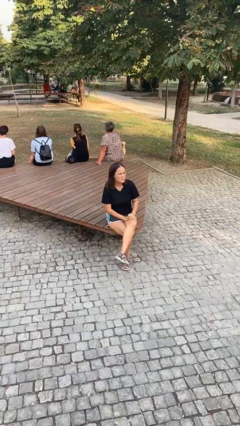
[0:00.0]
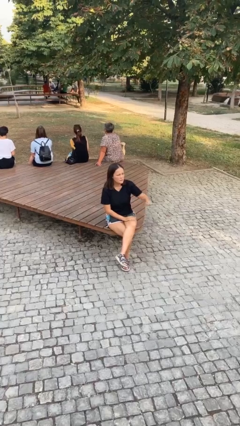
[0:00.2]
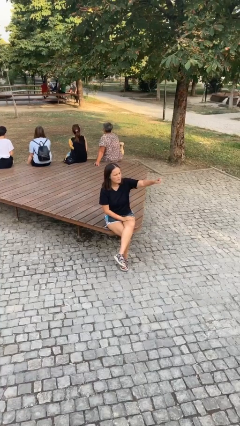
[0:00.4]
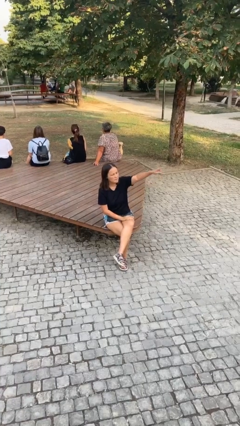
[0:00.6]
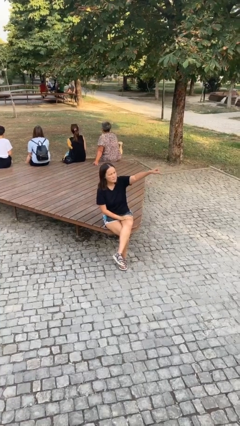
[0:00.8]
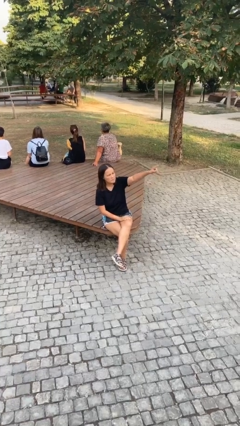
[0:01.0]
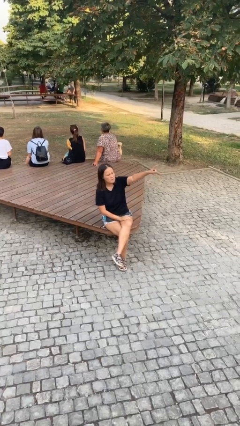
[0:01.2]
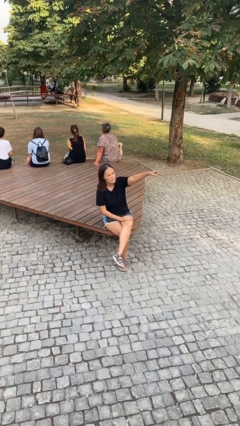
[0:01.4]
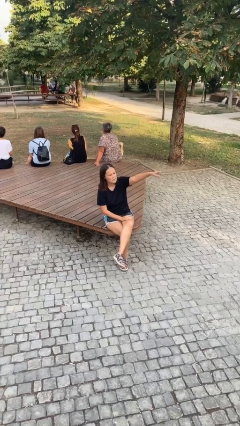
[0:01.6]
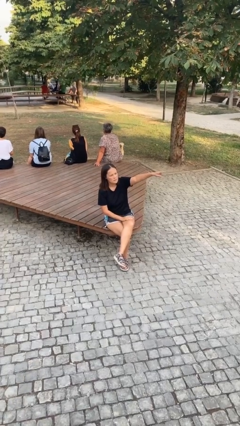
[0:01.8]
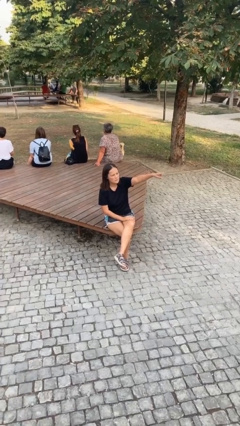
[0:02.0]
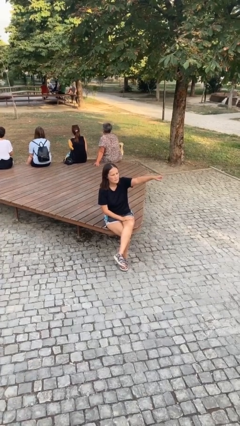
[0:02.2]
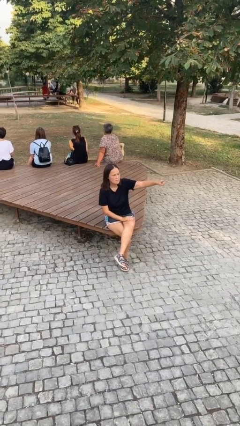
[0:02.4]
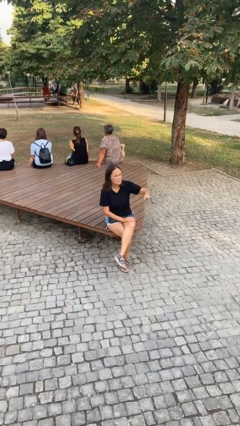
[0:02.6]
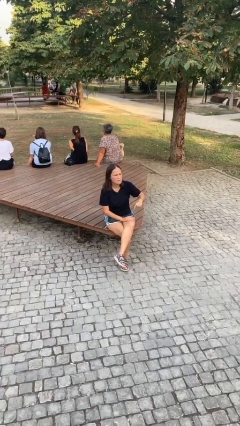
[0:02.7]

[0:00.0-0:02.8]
person points at person

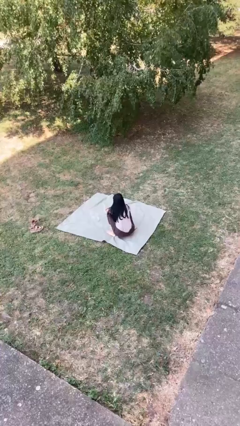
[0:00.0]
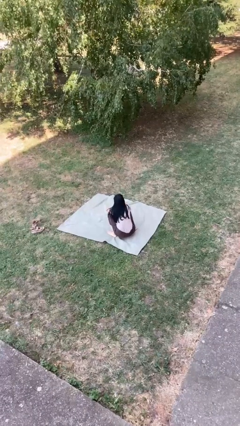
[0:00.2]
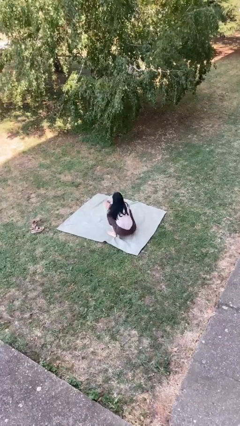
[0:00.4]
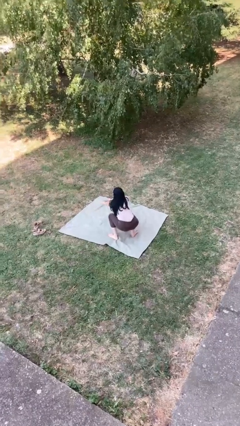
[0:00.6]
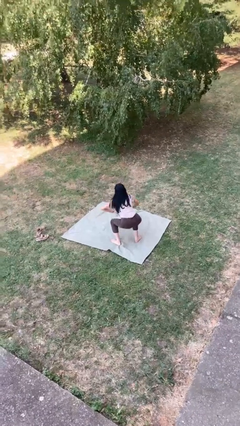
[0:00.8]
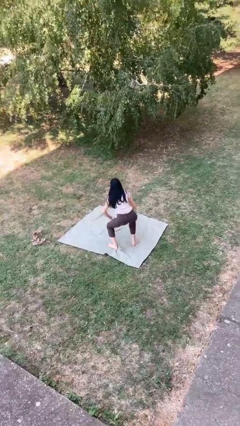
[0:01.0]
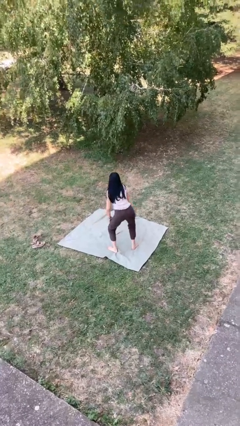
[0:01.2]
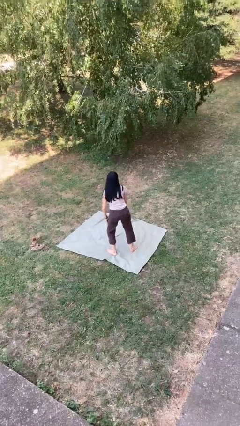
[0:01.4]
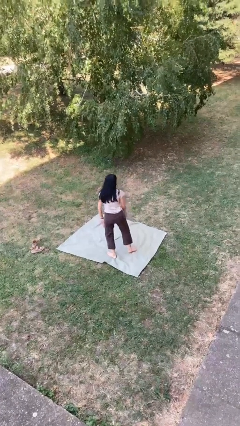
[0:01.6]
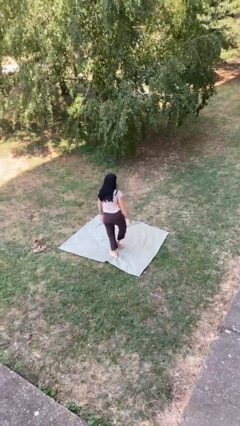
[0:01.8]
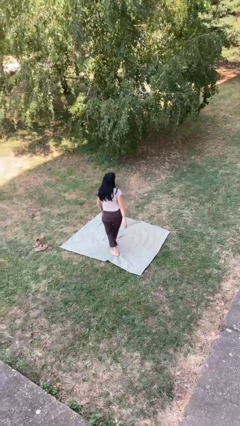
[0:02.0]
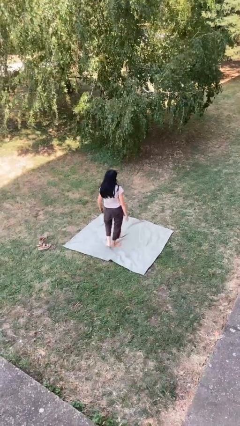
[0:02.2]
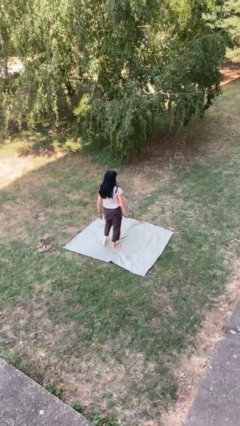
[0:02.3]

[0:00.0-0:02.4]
person stands up

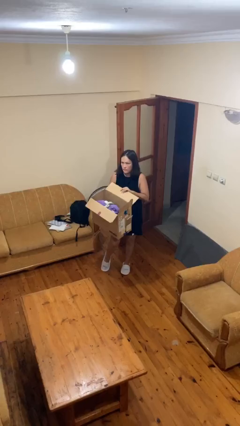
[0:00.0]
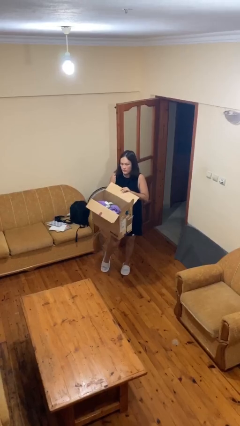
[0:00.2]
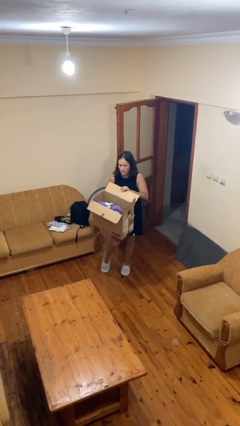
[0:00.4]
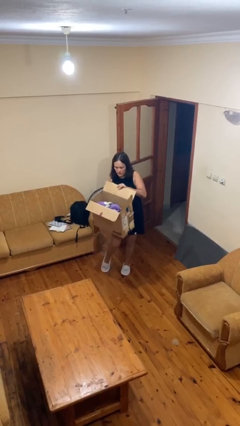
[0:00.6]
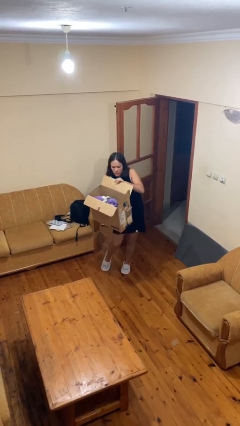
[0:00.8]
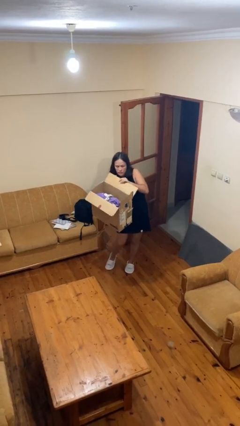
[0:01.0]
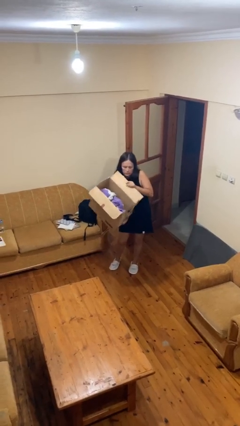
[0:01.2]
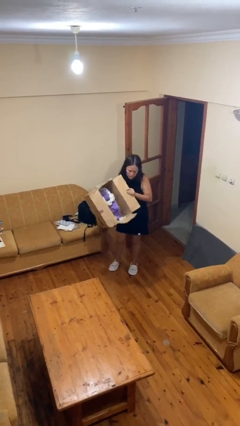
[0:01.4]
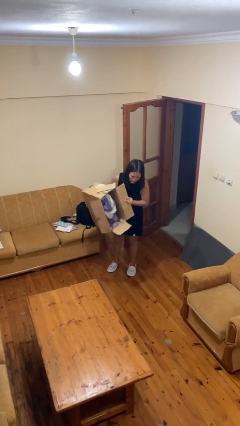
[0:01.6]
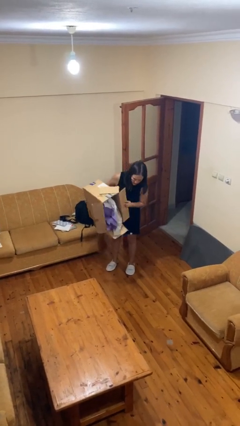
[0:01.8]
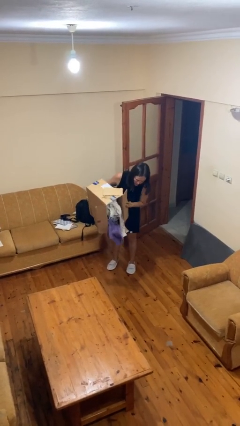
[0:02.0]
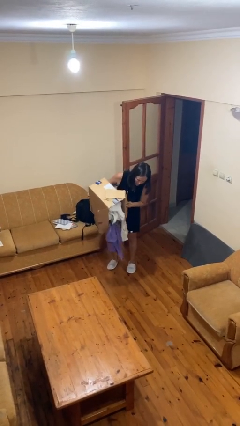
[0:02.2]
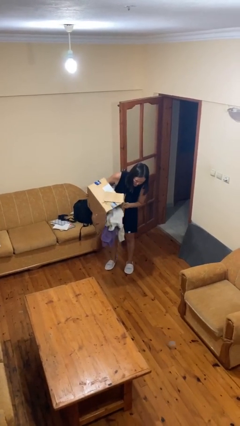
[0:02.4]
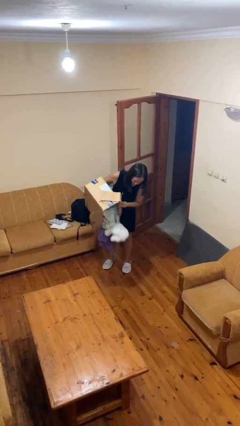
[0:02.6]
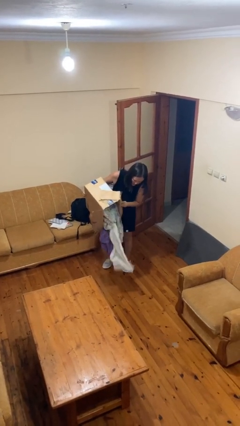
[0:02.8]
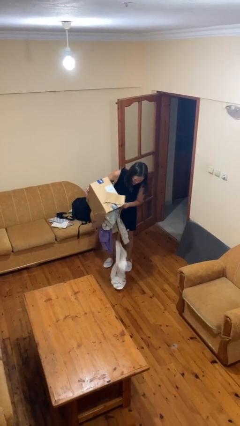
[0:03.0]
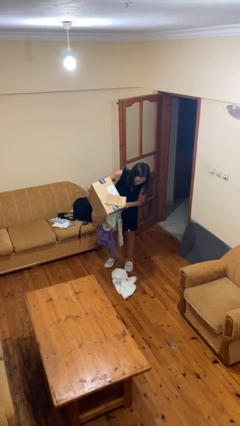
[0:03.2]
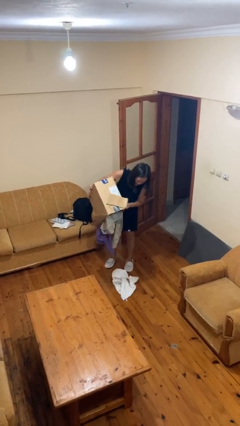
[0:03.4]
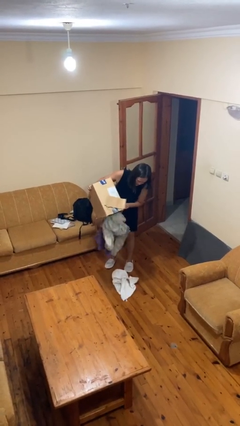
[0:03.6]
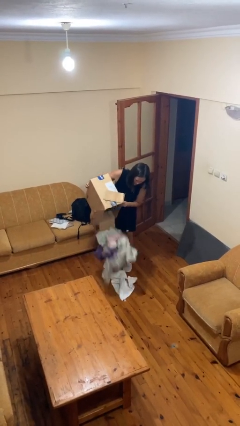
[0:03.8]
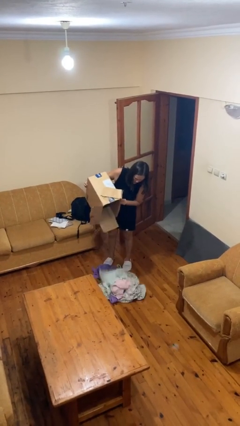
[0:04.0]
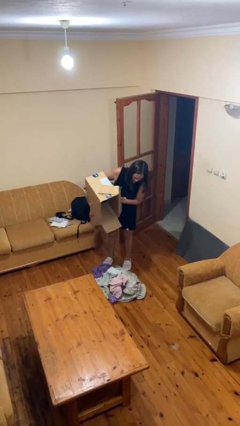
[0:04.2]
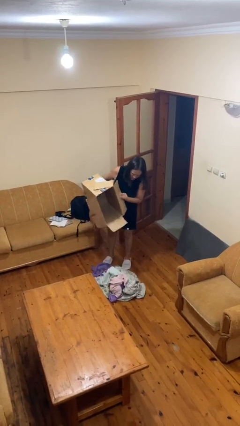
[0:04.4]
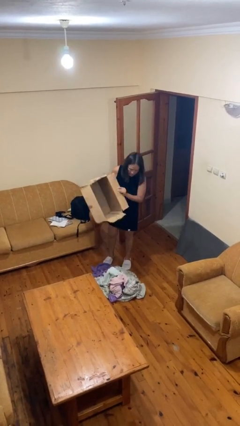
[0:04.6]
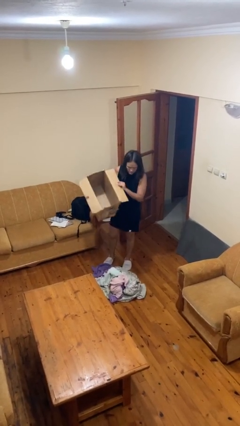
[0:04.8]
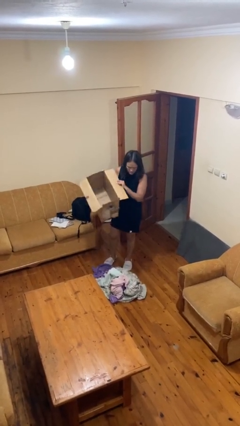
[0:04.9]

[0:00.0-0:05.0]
person unloads box onto floor

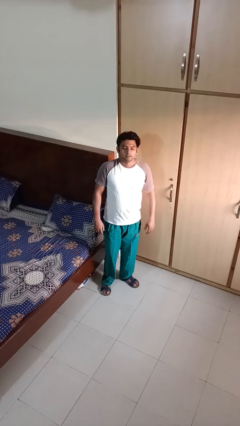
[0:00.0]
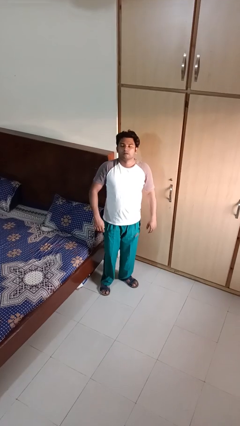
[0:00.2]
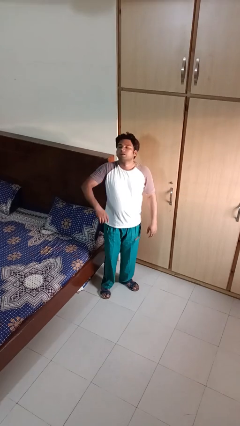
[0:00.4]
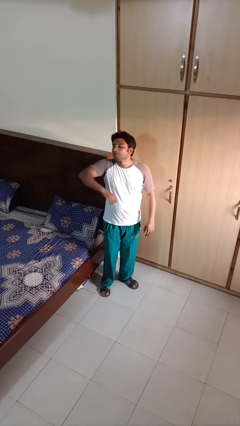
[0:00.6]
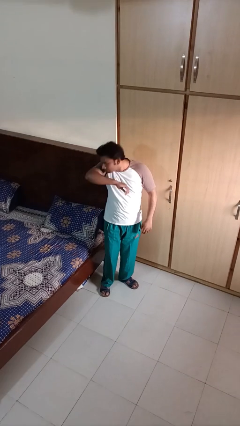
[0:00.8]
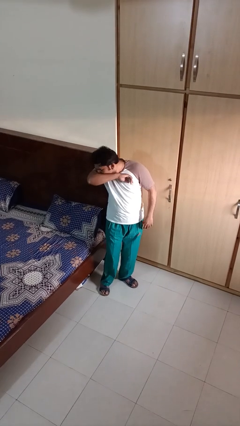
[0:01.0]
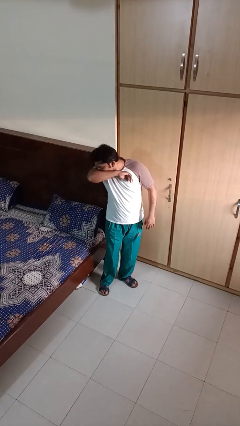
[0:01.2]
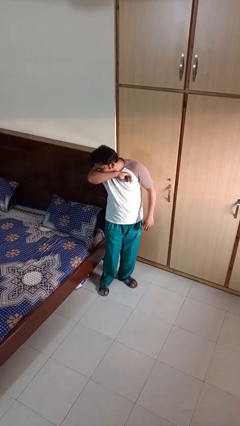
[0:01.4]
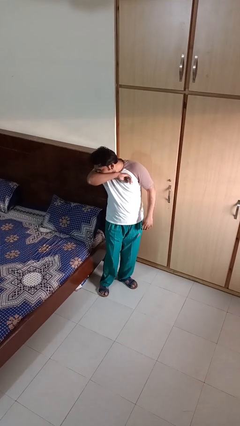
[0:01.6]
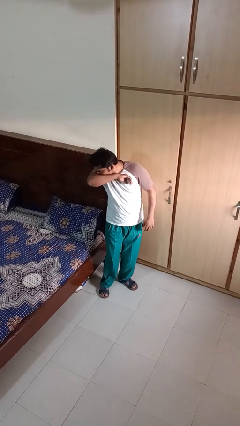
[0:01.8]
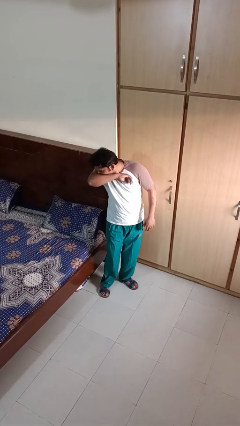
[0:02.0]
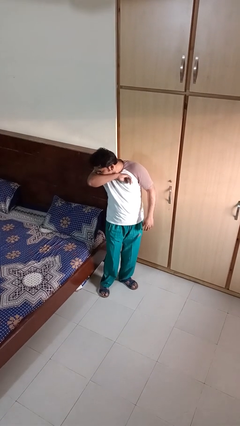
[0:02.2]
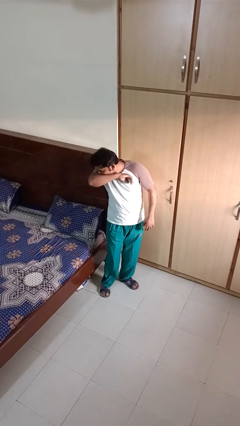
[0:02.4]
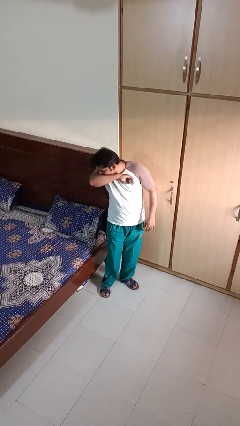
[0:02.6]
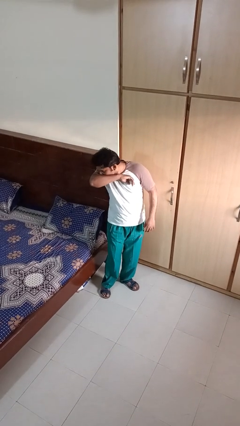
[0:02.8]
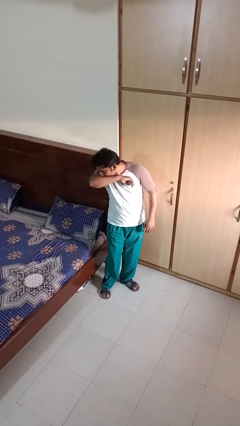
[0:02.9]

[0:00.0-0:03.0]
person sneezes into arm

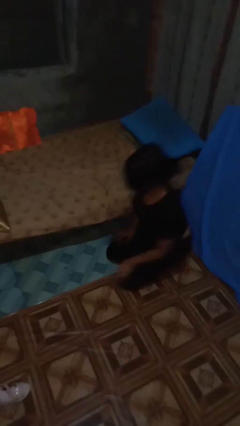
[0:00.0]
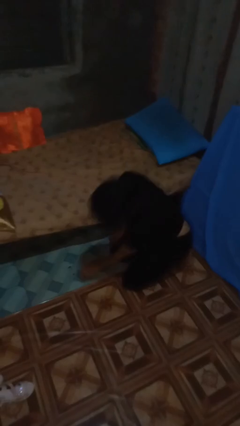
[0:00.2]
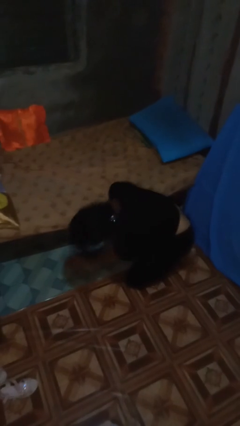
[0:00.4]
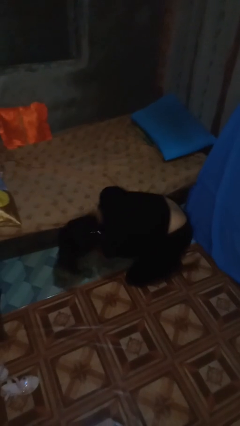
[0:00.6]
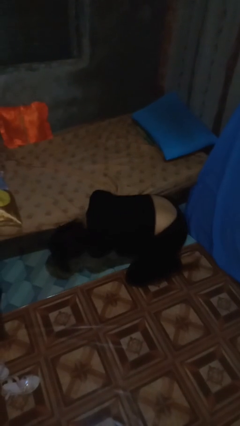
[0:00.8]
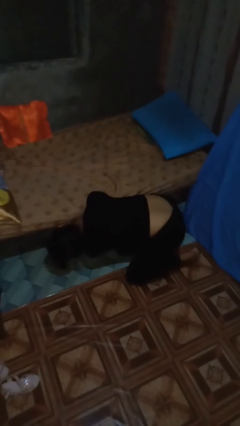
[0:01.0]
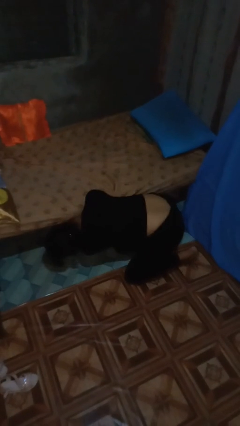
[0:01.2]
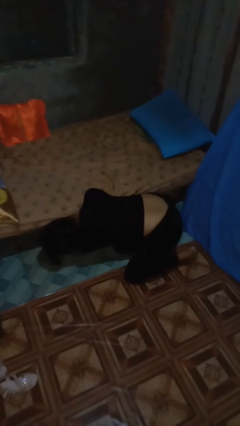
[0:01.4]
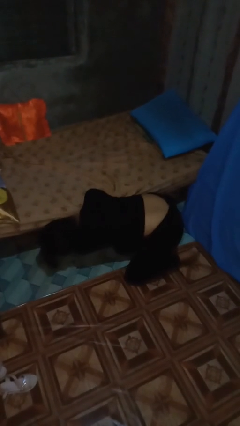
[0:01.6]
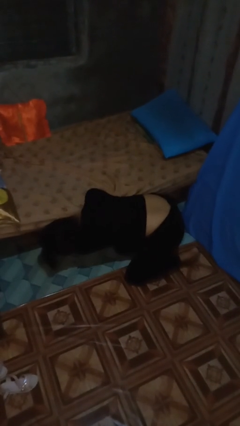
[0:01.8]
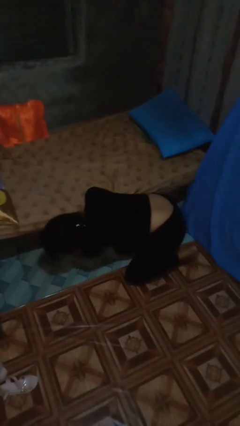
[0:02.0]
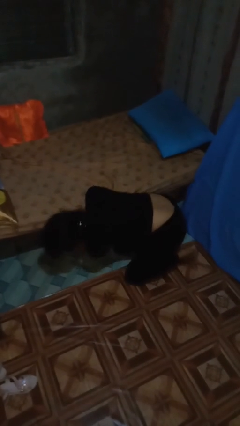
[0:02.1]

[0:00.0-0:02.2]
person searches under bed

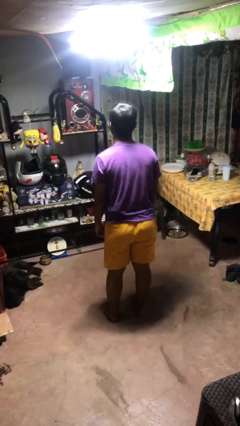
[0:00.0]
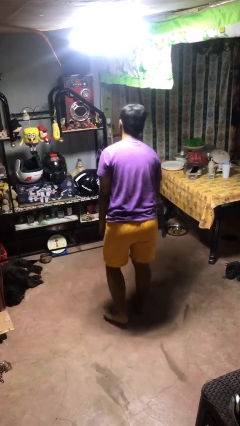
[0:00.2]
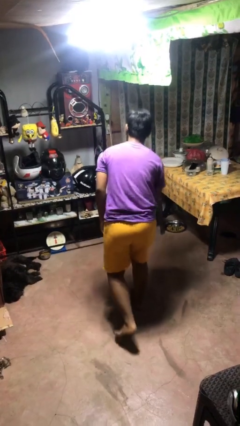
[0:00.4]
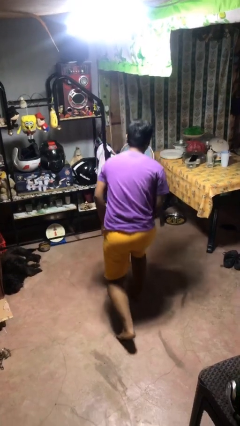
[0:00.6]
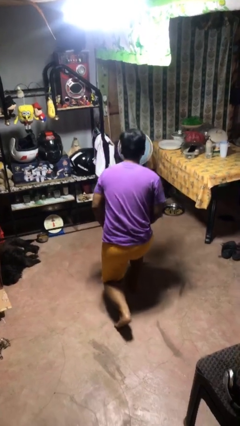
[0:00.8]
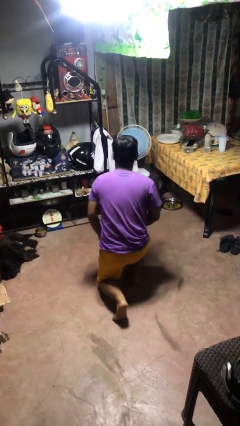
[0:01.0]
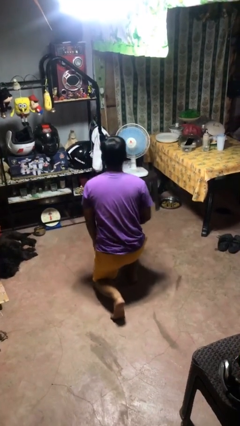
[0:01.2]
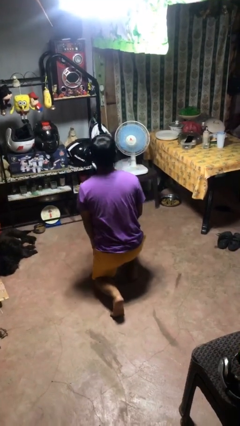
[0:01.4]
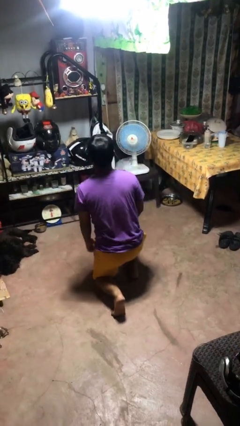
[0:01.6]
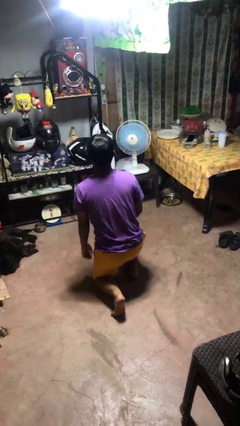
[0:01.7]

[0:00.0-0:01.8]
person kneels
